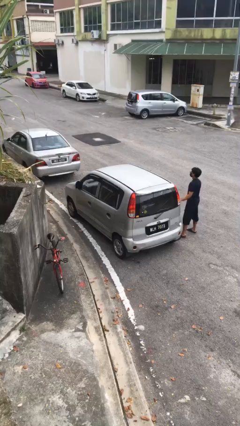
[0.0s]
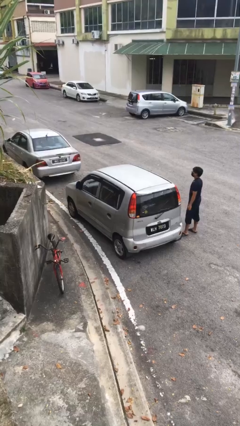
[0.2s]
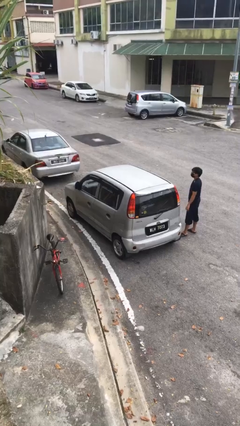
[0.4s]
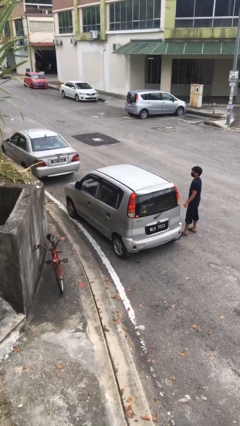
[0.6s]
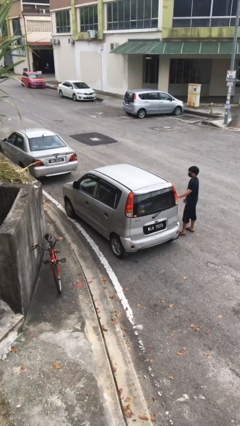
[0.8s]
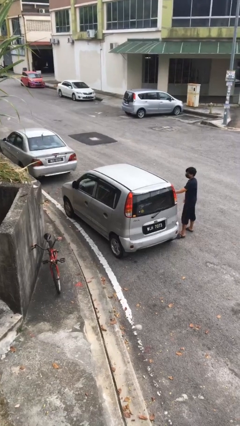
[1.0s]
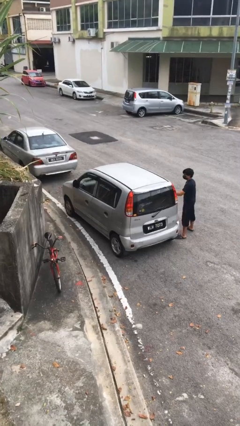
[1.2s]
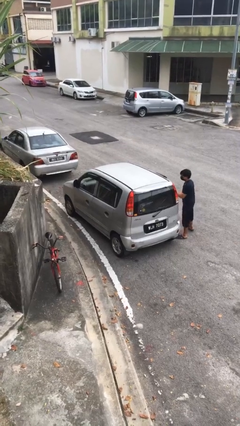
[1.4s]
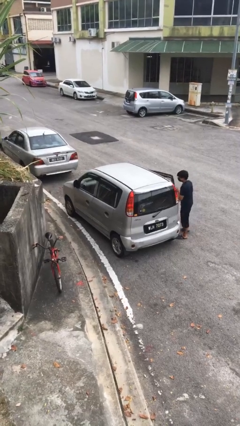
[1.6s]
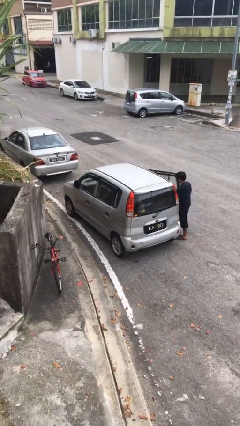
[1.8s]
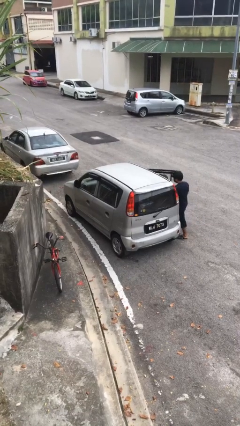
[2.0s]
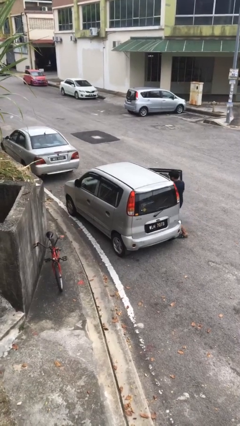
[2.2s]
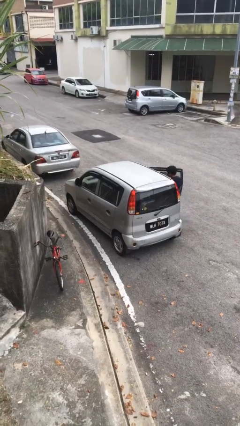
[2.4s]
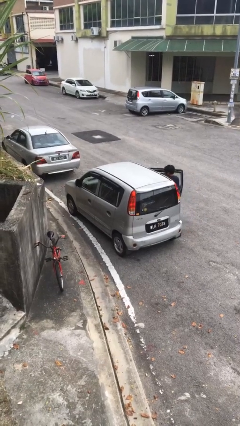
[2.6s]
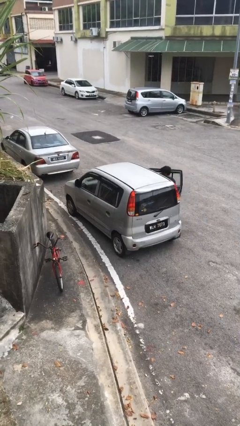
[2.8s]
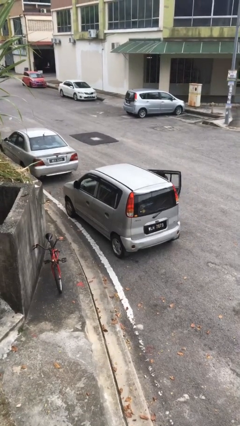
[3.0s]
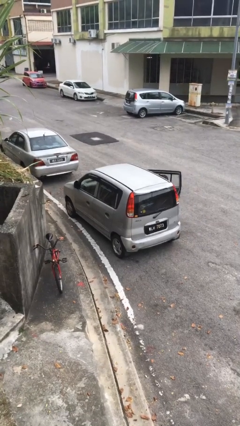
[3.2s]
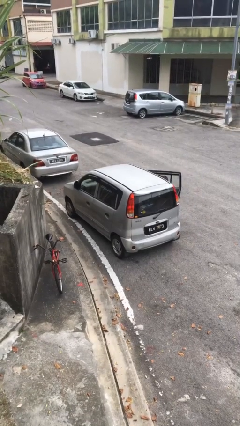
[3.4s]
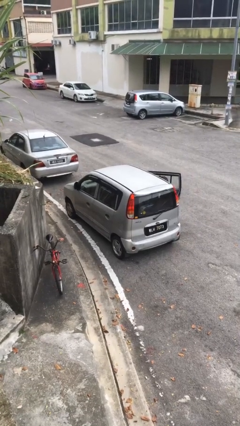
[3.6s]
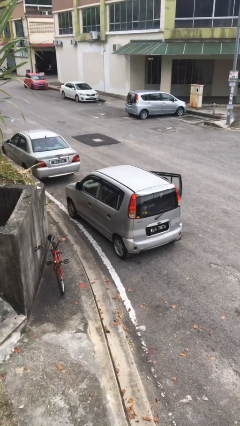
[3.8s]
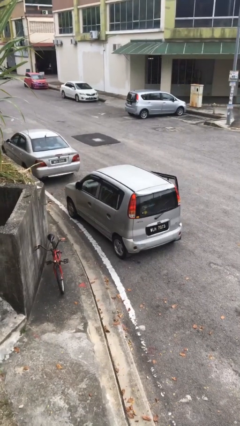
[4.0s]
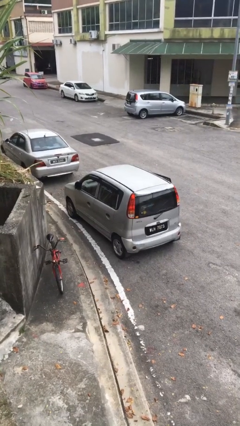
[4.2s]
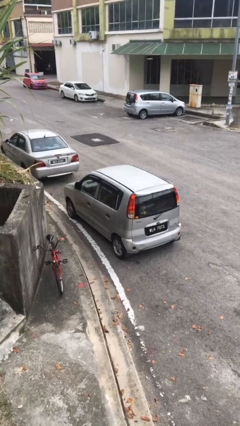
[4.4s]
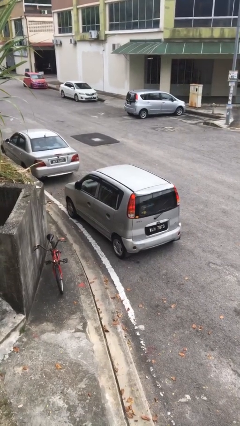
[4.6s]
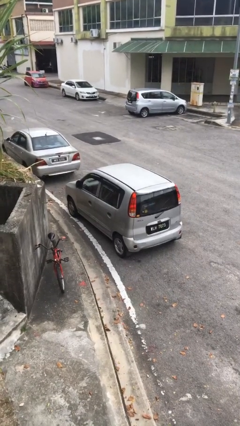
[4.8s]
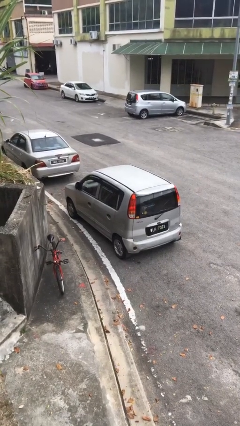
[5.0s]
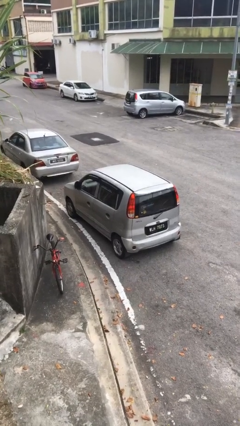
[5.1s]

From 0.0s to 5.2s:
car picks up person

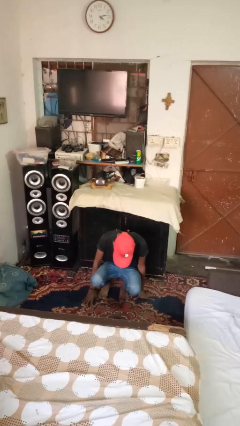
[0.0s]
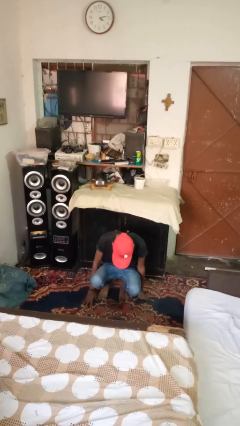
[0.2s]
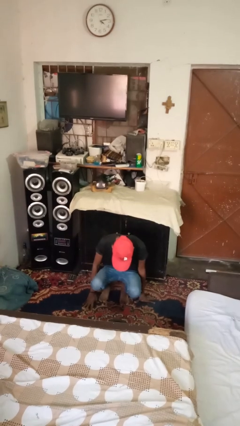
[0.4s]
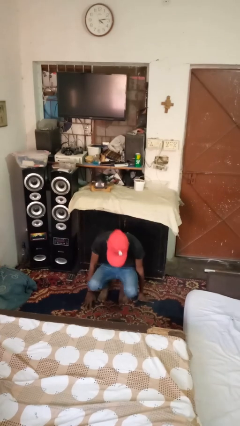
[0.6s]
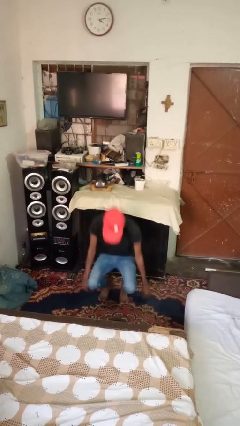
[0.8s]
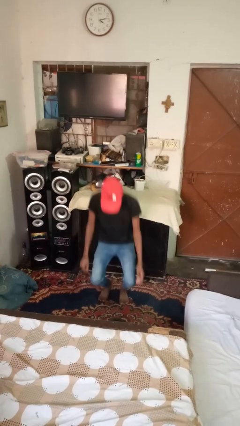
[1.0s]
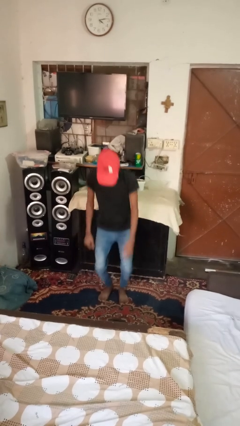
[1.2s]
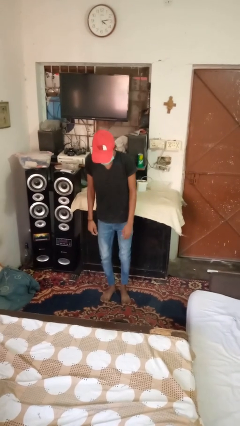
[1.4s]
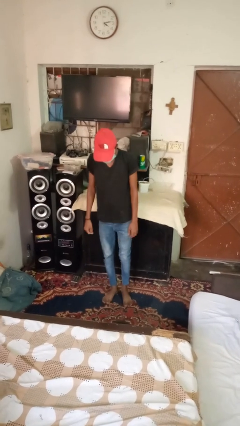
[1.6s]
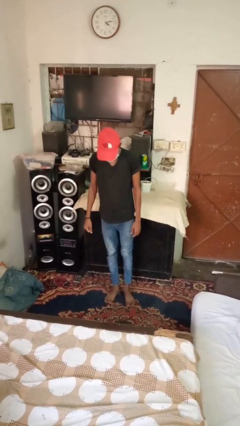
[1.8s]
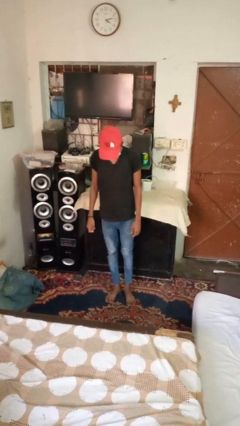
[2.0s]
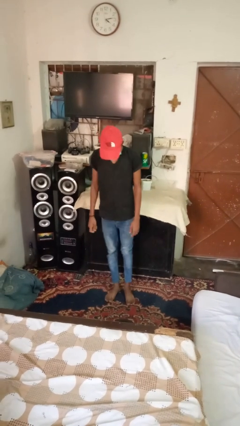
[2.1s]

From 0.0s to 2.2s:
person stands up from floor

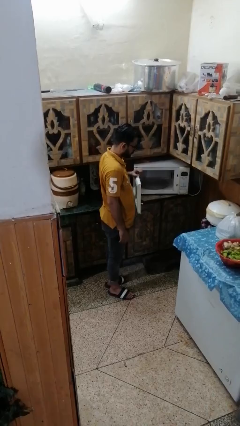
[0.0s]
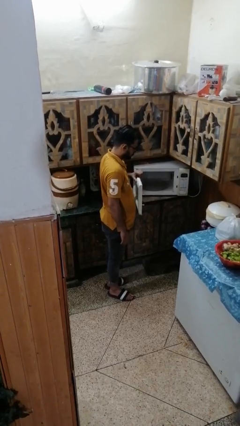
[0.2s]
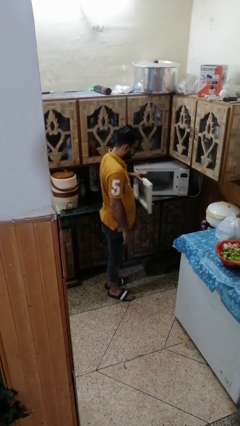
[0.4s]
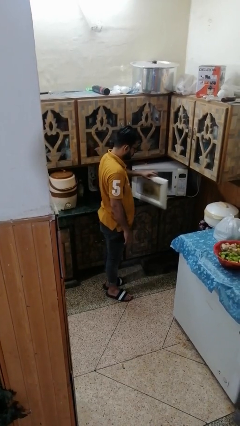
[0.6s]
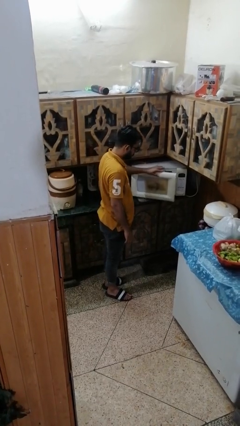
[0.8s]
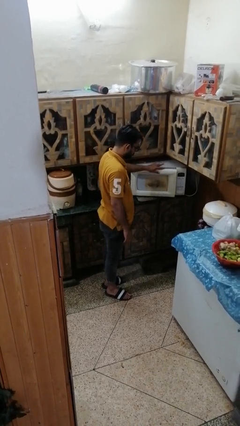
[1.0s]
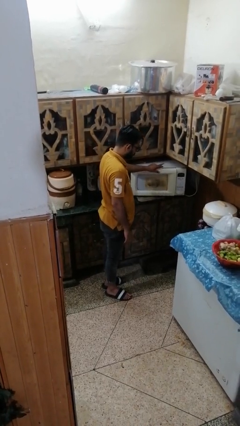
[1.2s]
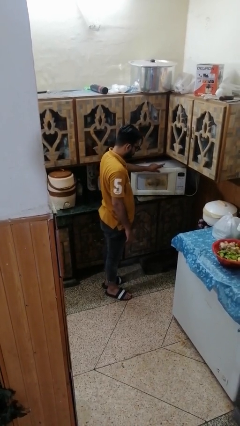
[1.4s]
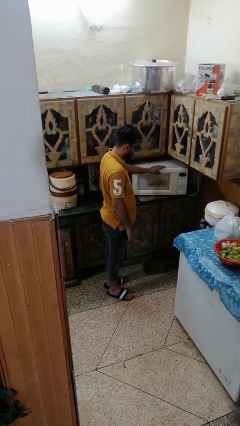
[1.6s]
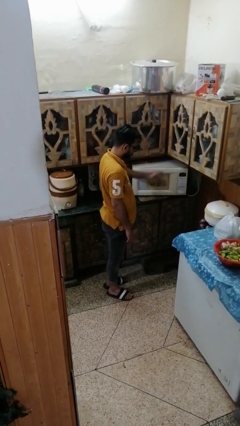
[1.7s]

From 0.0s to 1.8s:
person closes microwave

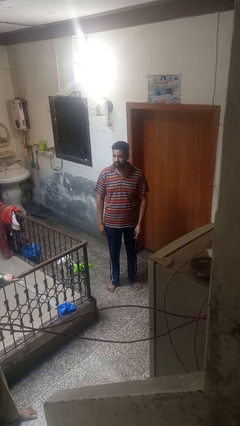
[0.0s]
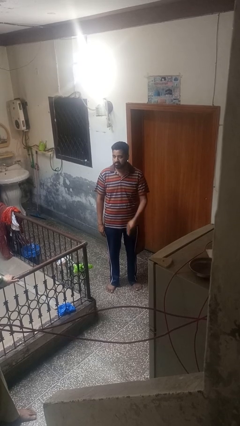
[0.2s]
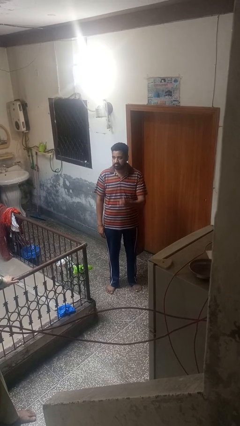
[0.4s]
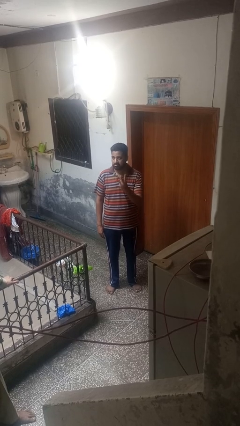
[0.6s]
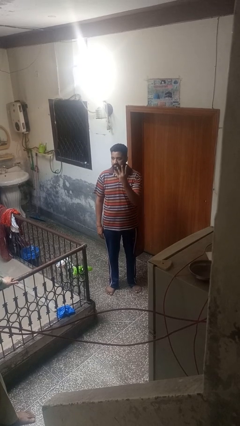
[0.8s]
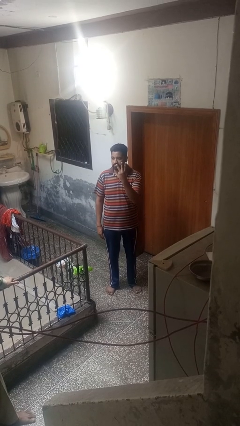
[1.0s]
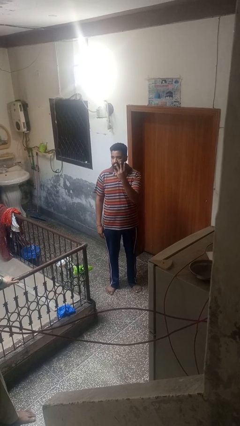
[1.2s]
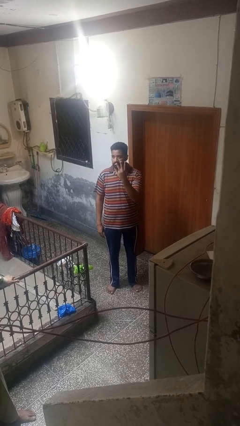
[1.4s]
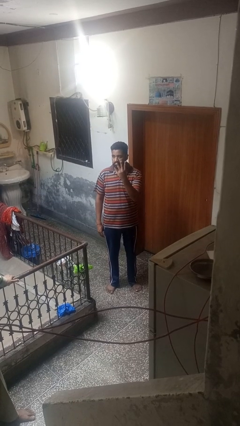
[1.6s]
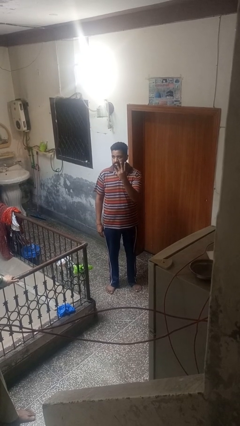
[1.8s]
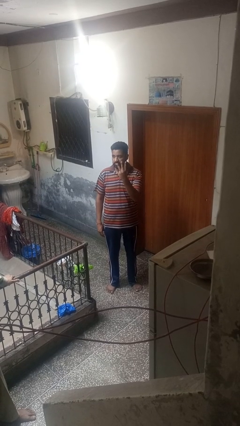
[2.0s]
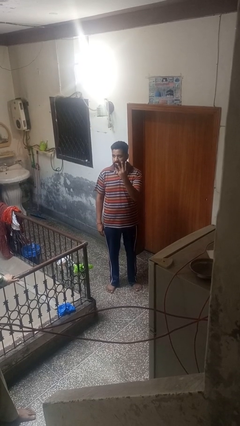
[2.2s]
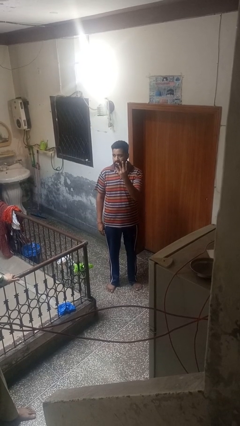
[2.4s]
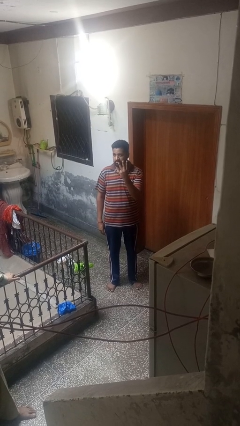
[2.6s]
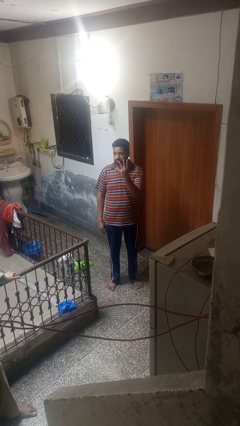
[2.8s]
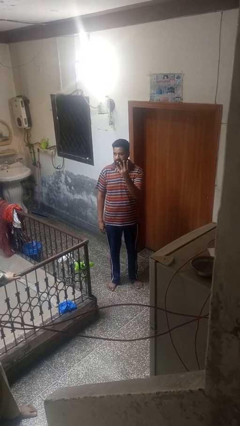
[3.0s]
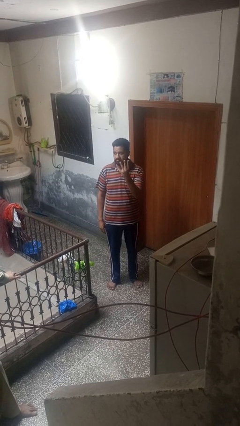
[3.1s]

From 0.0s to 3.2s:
person gestures number three

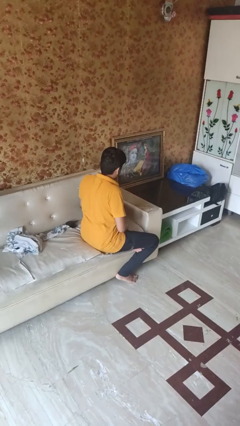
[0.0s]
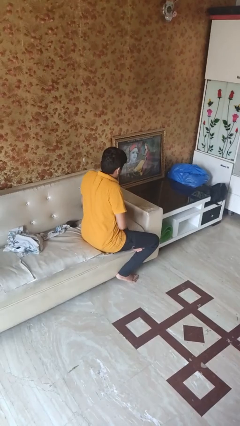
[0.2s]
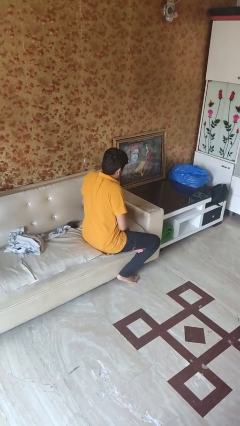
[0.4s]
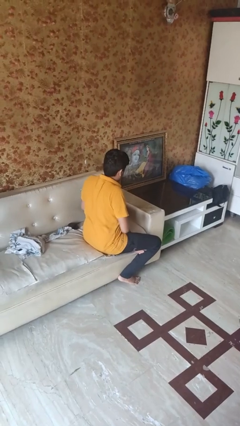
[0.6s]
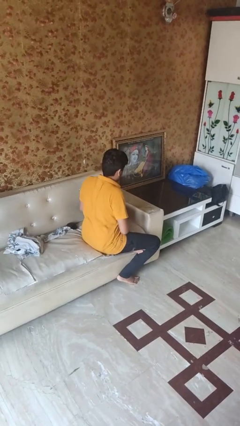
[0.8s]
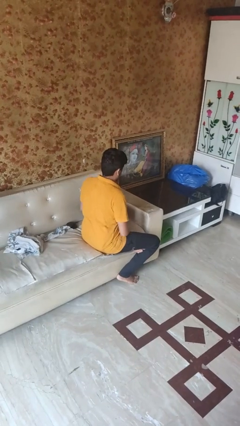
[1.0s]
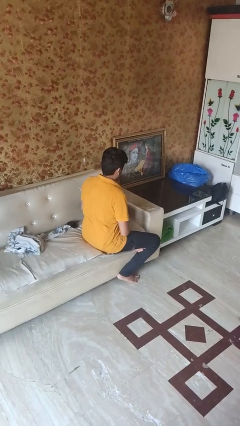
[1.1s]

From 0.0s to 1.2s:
person shrugs

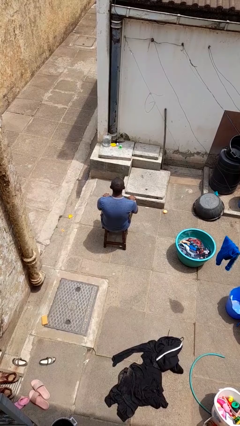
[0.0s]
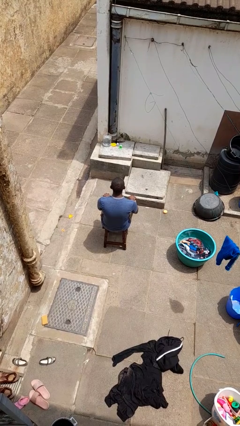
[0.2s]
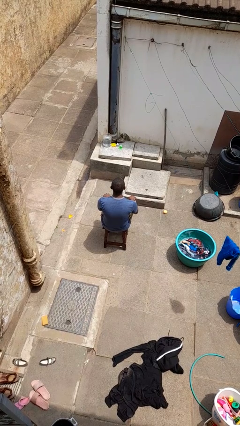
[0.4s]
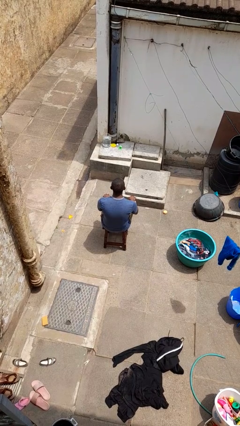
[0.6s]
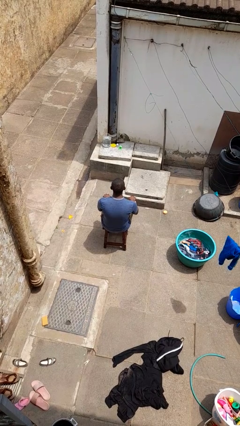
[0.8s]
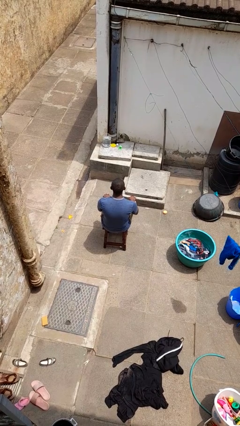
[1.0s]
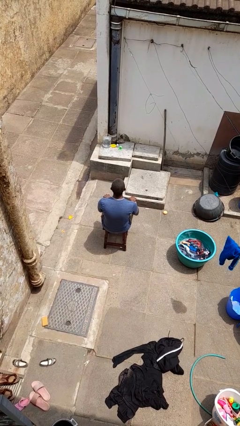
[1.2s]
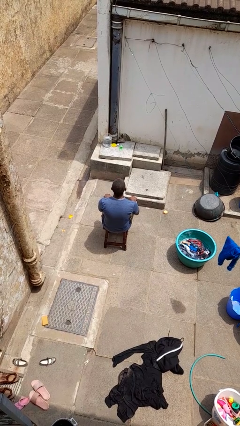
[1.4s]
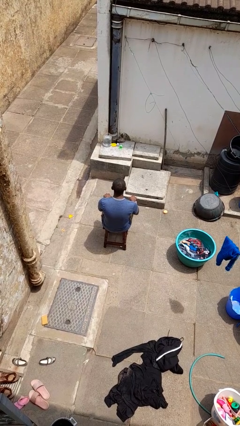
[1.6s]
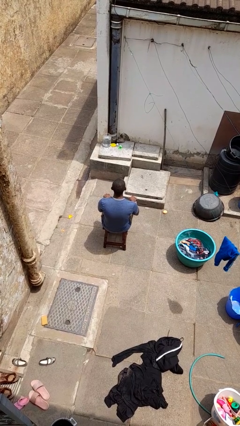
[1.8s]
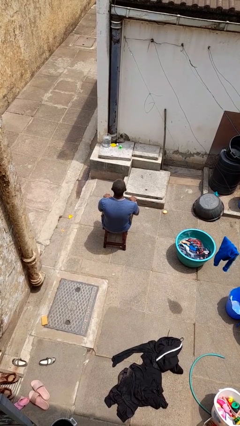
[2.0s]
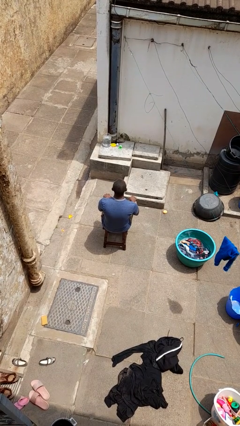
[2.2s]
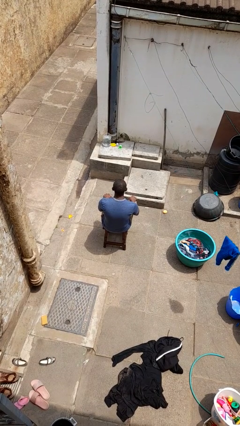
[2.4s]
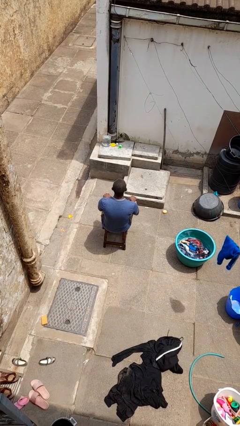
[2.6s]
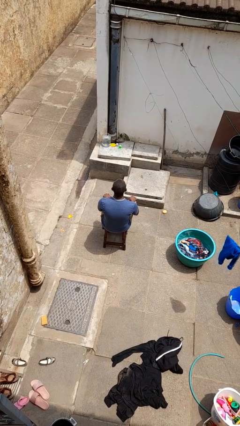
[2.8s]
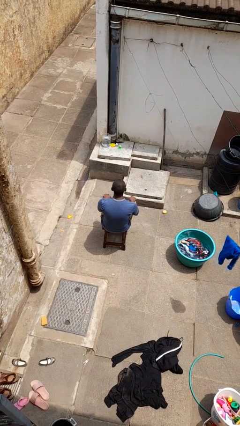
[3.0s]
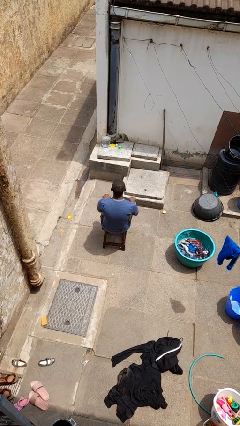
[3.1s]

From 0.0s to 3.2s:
person nods head

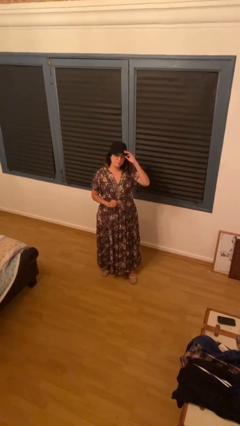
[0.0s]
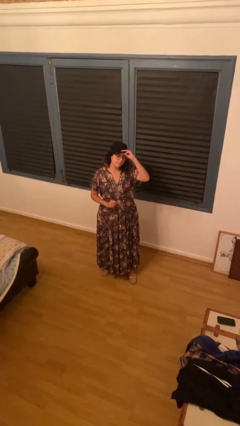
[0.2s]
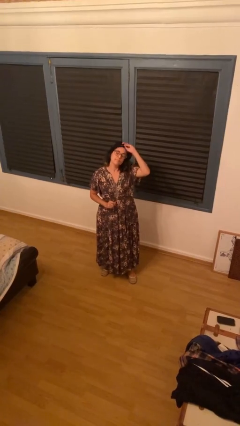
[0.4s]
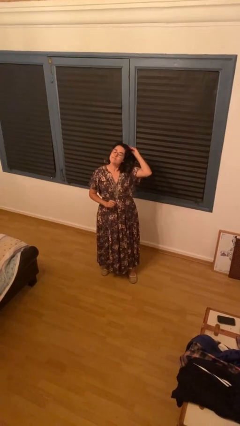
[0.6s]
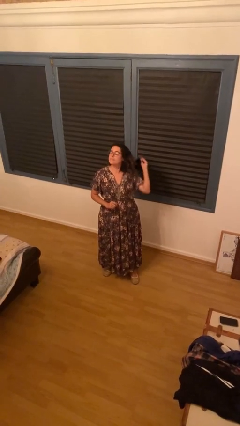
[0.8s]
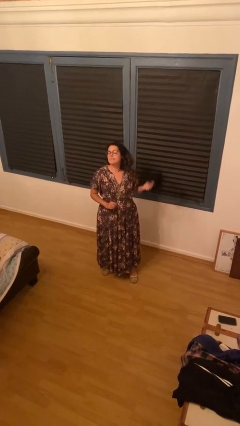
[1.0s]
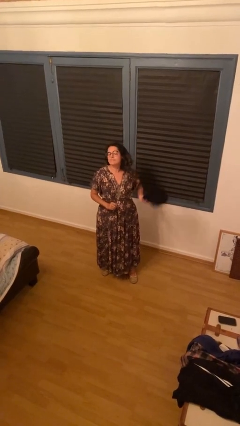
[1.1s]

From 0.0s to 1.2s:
person takes off hat
